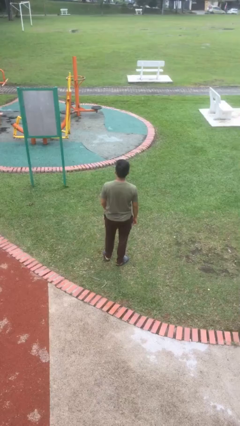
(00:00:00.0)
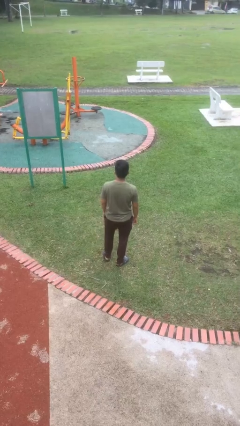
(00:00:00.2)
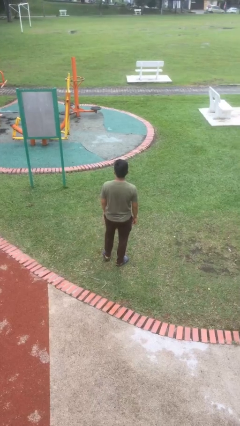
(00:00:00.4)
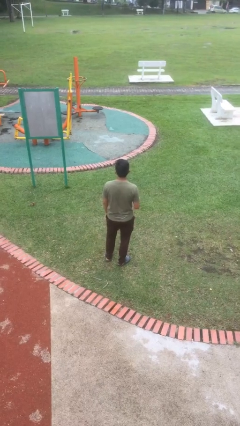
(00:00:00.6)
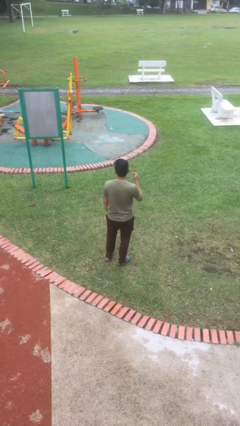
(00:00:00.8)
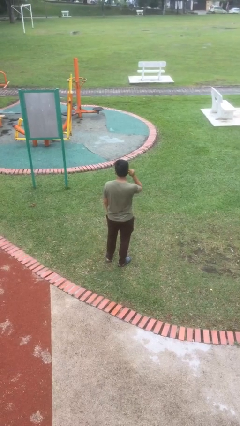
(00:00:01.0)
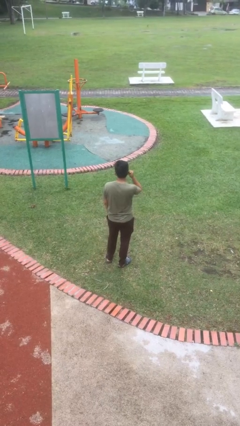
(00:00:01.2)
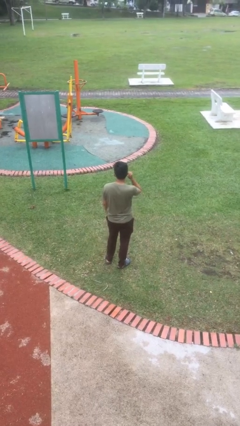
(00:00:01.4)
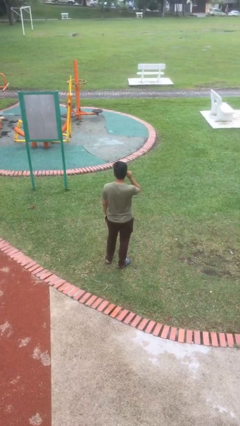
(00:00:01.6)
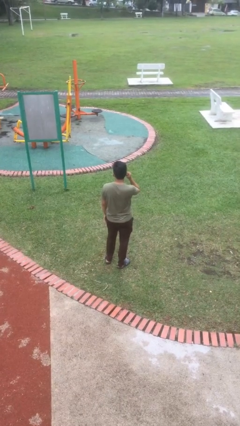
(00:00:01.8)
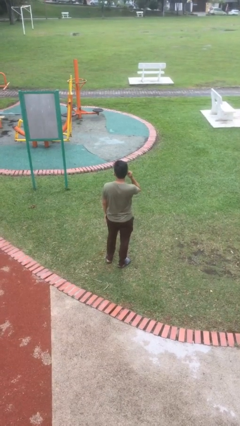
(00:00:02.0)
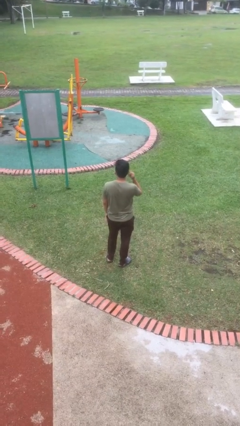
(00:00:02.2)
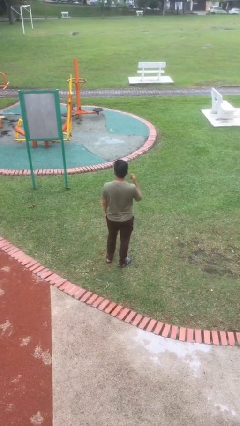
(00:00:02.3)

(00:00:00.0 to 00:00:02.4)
person touches earlobe

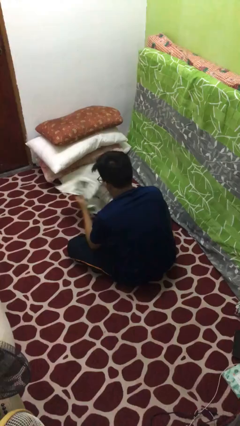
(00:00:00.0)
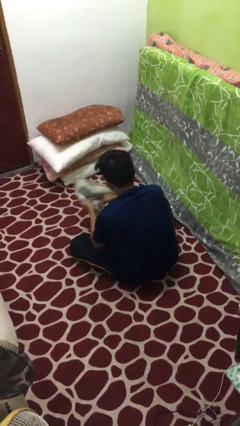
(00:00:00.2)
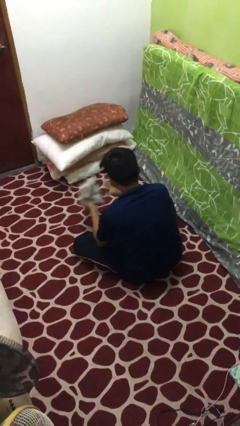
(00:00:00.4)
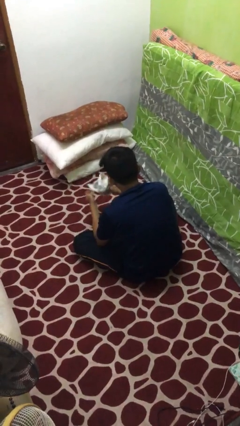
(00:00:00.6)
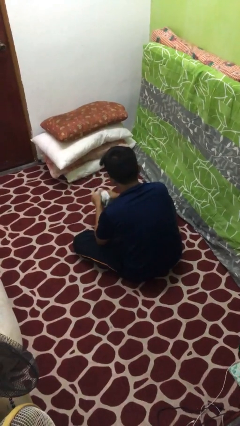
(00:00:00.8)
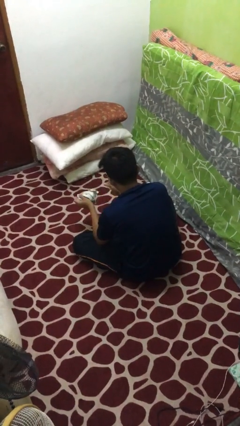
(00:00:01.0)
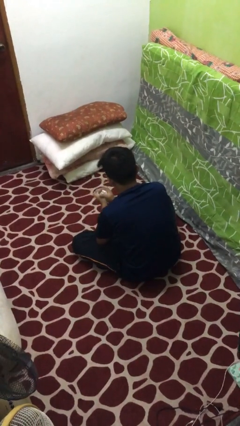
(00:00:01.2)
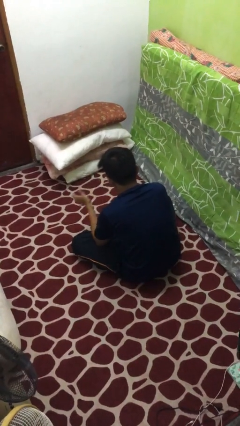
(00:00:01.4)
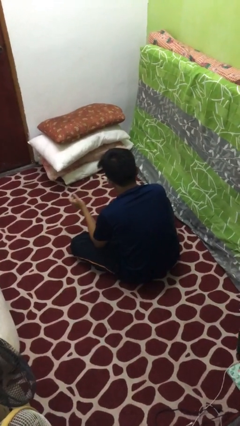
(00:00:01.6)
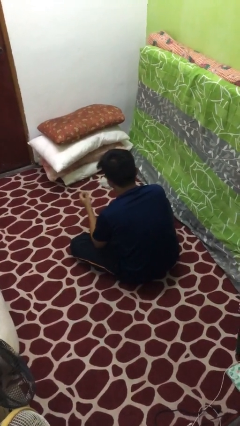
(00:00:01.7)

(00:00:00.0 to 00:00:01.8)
person crumples paper

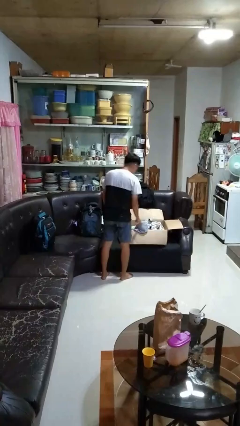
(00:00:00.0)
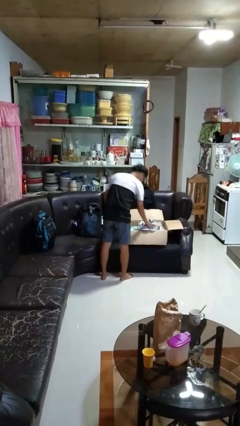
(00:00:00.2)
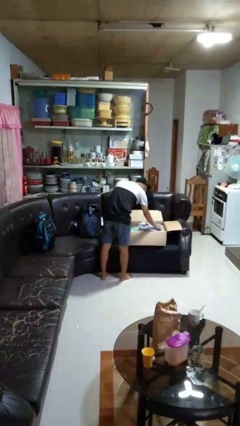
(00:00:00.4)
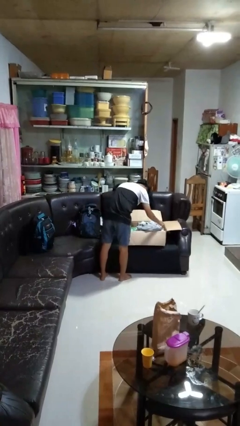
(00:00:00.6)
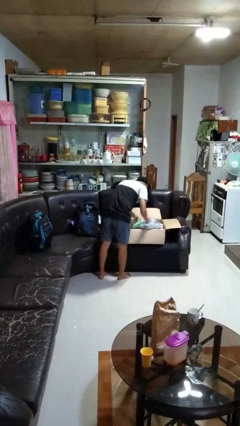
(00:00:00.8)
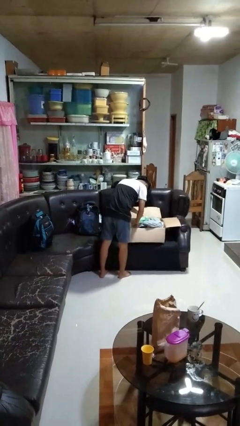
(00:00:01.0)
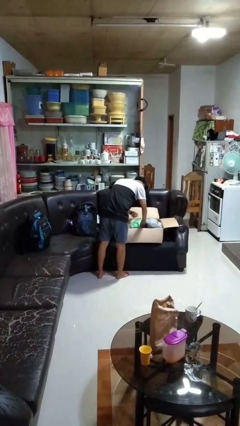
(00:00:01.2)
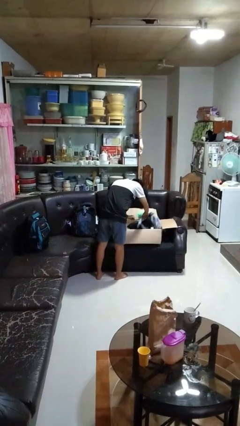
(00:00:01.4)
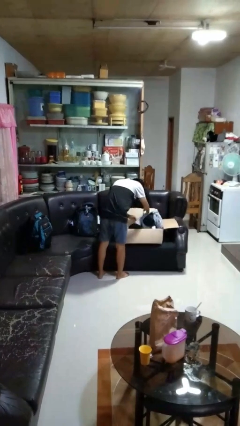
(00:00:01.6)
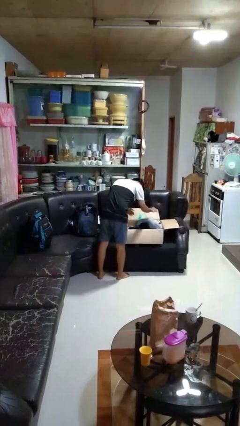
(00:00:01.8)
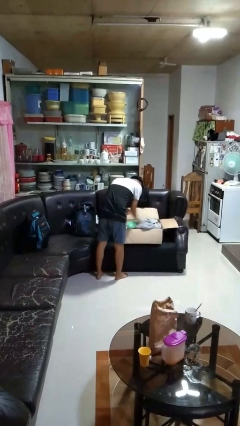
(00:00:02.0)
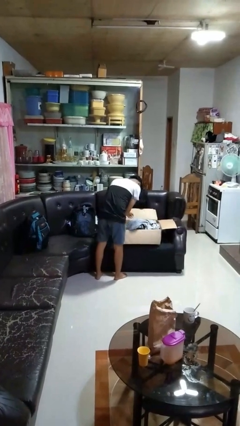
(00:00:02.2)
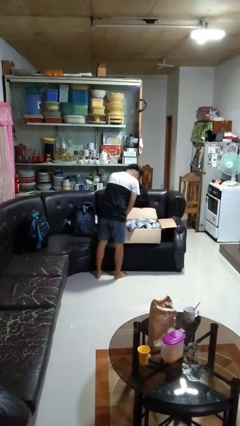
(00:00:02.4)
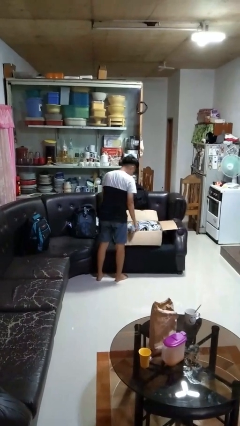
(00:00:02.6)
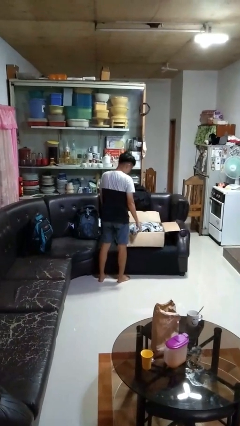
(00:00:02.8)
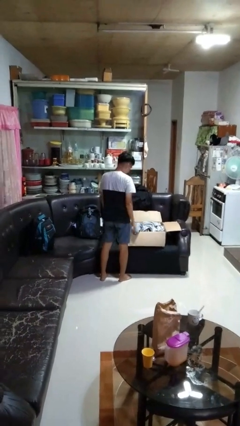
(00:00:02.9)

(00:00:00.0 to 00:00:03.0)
person searches in box

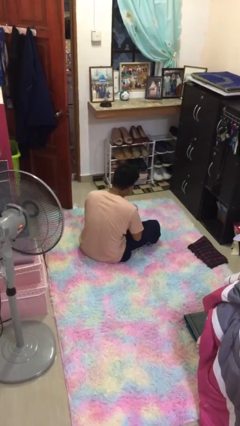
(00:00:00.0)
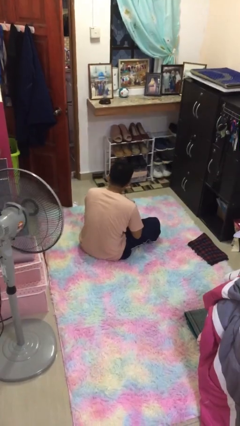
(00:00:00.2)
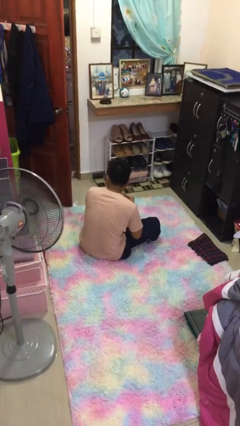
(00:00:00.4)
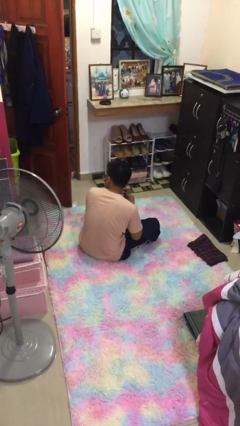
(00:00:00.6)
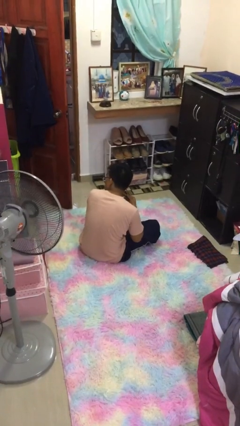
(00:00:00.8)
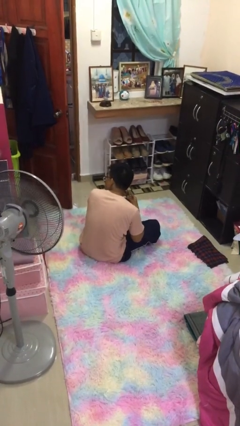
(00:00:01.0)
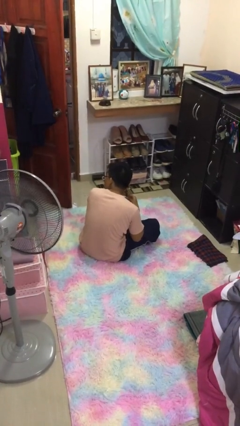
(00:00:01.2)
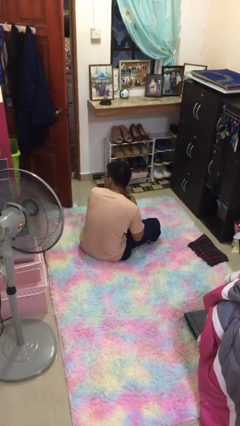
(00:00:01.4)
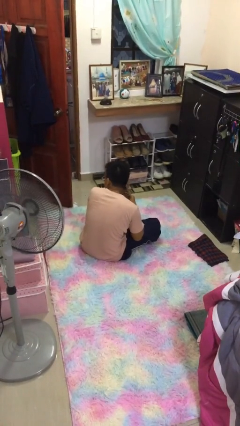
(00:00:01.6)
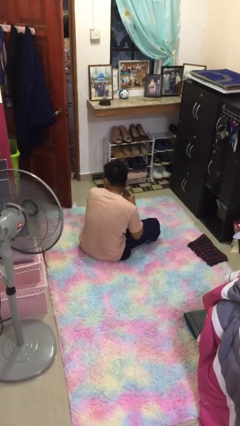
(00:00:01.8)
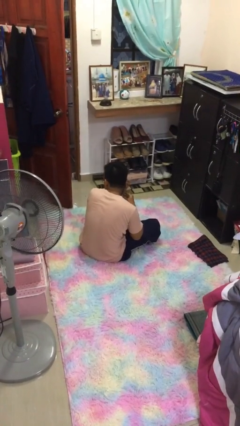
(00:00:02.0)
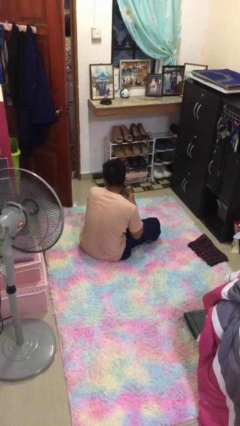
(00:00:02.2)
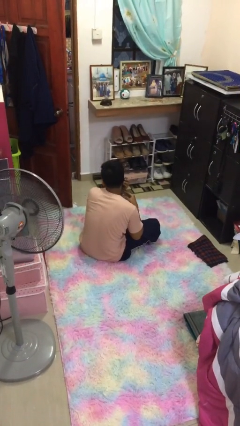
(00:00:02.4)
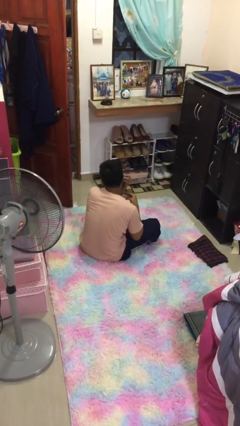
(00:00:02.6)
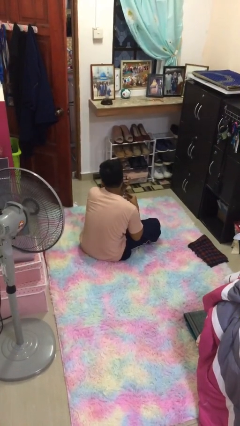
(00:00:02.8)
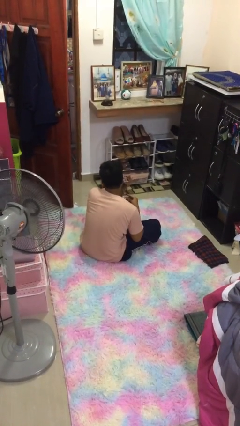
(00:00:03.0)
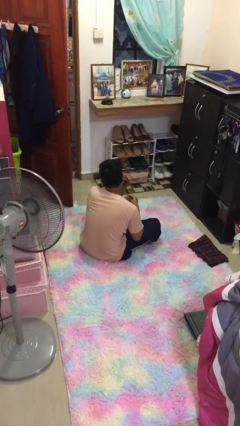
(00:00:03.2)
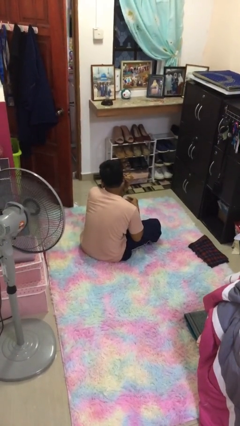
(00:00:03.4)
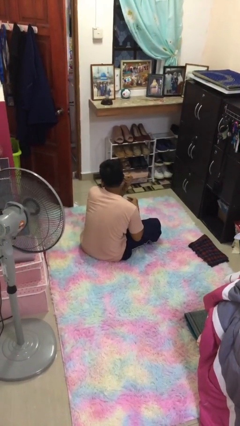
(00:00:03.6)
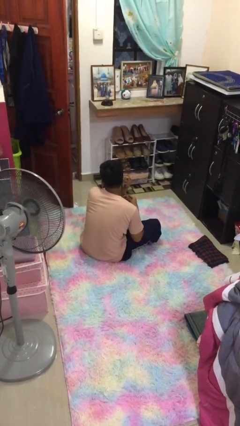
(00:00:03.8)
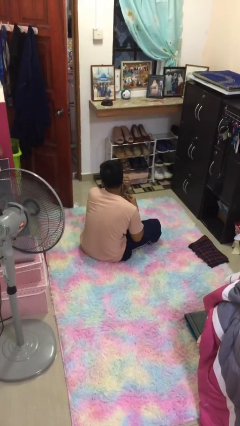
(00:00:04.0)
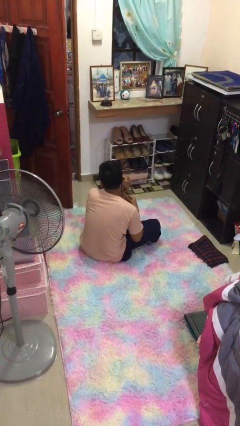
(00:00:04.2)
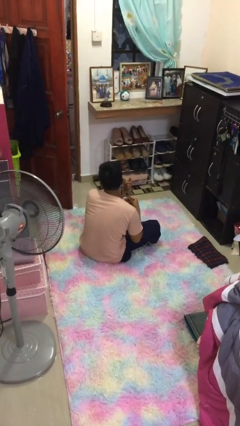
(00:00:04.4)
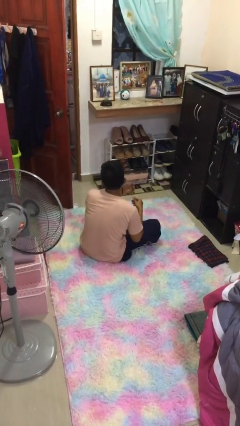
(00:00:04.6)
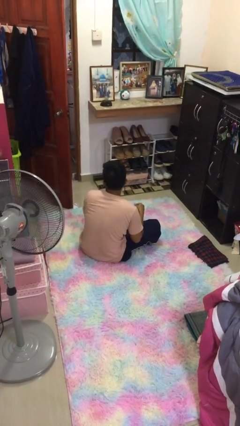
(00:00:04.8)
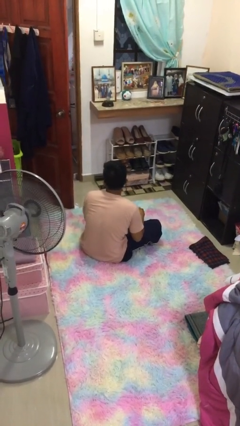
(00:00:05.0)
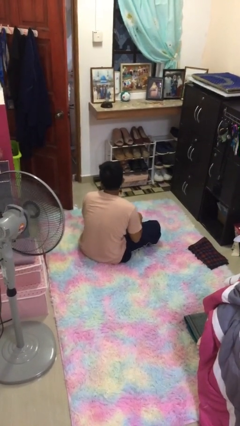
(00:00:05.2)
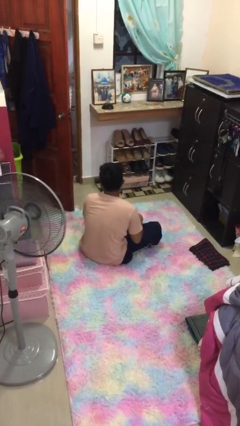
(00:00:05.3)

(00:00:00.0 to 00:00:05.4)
person puts on earrings

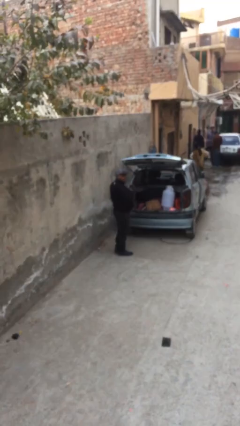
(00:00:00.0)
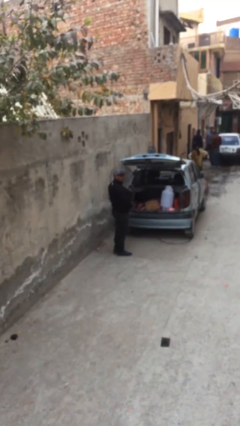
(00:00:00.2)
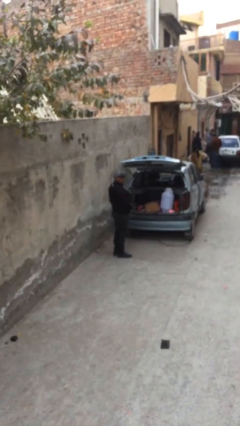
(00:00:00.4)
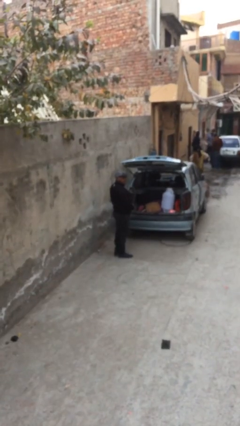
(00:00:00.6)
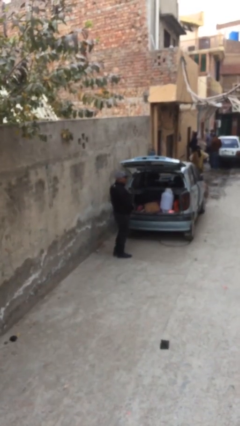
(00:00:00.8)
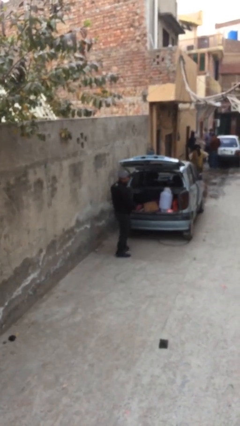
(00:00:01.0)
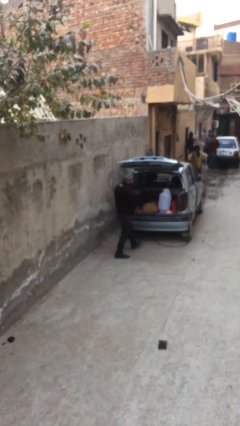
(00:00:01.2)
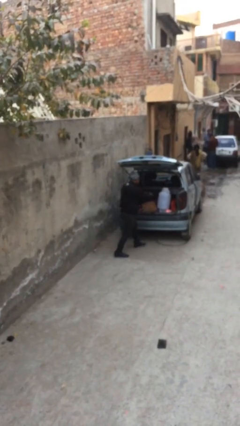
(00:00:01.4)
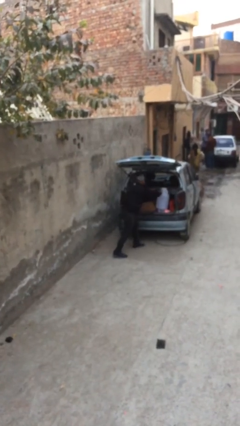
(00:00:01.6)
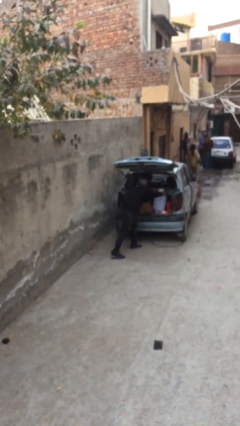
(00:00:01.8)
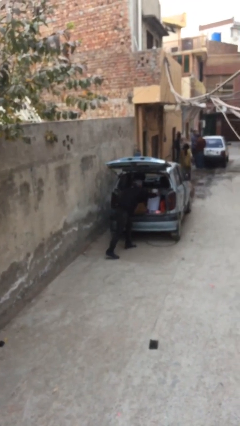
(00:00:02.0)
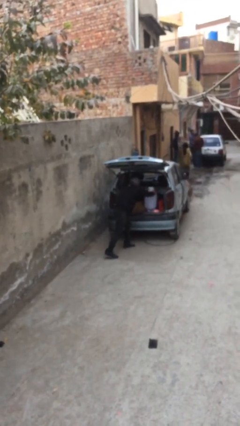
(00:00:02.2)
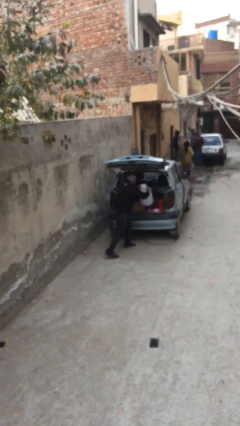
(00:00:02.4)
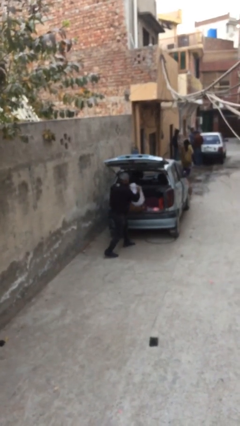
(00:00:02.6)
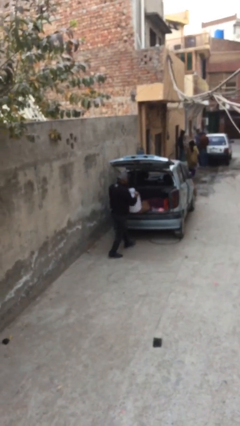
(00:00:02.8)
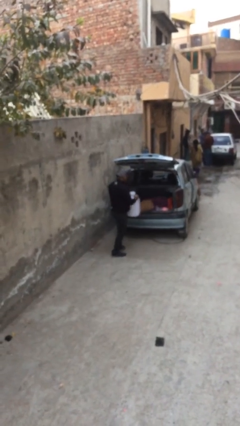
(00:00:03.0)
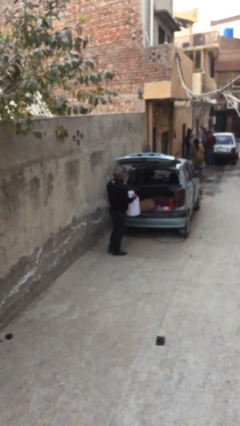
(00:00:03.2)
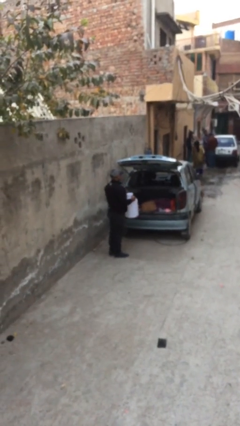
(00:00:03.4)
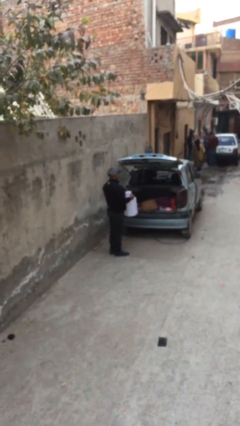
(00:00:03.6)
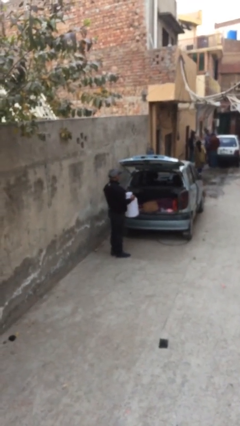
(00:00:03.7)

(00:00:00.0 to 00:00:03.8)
person unloads car

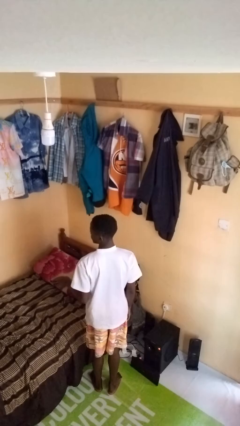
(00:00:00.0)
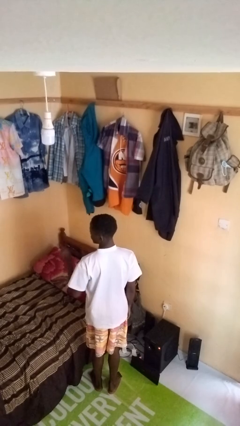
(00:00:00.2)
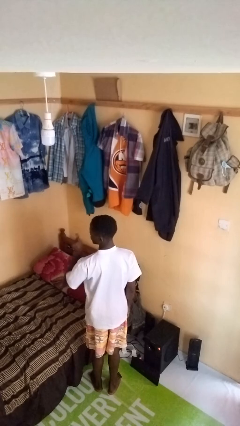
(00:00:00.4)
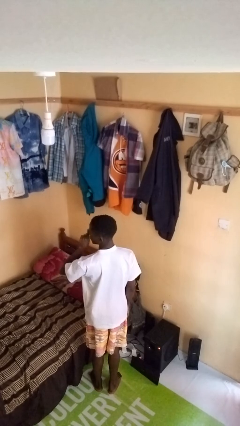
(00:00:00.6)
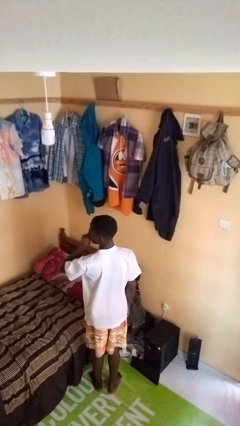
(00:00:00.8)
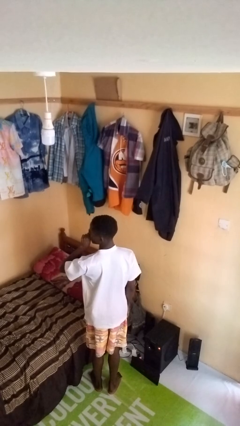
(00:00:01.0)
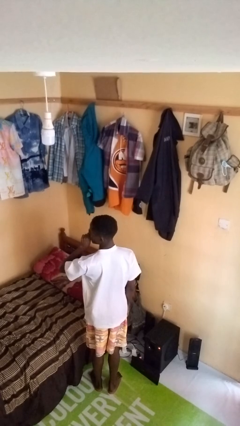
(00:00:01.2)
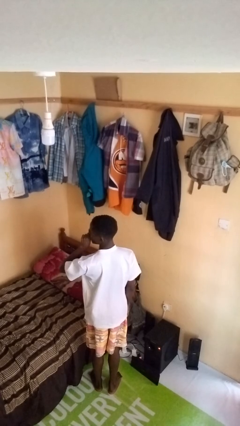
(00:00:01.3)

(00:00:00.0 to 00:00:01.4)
person gestures be quiet
